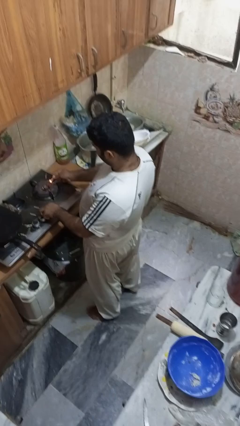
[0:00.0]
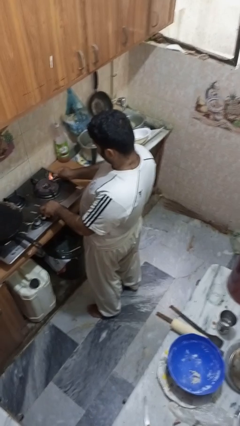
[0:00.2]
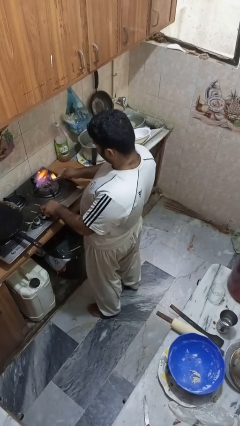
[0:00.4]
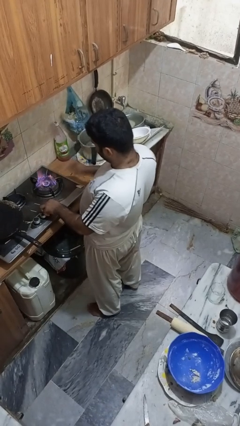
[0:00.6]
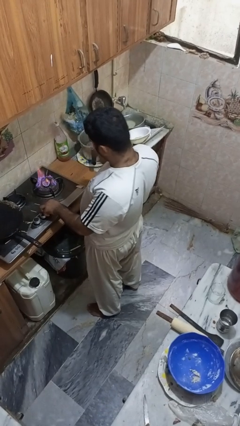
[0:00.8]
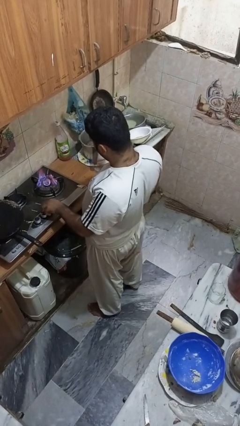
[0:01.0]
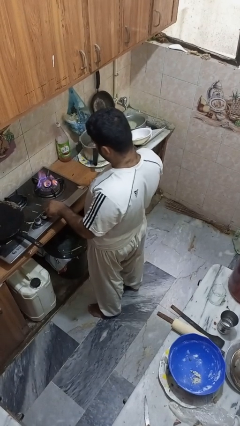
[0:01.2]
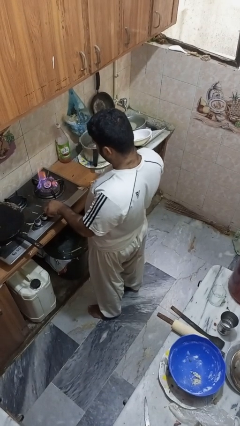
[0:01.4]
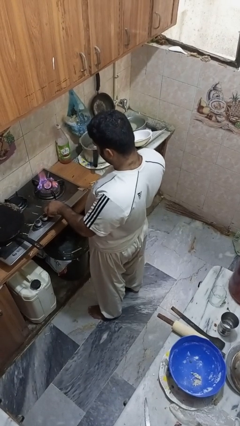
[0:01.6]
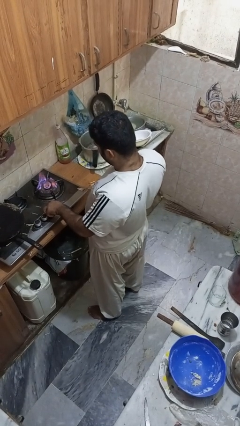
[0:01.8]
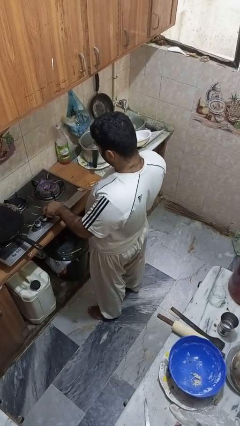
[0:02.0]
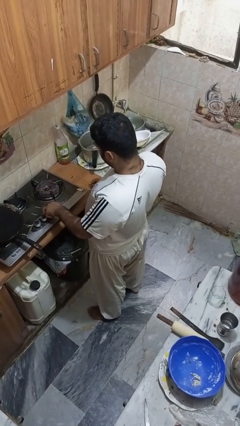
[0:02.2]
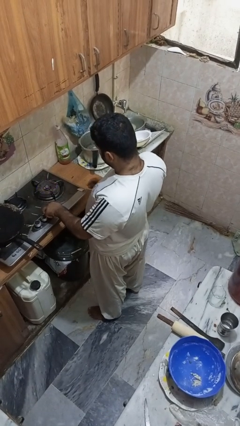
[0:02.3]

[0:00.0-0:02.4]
person turns off stovetop

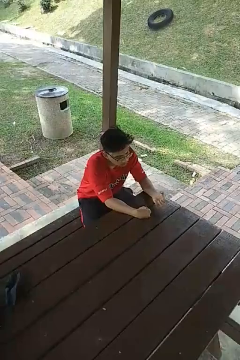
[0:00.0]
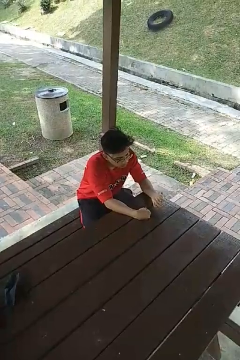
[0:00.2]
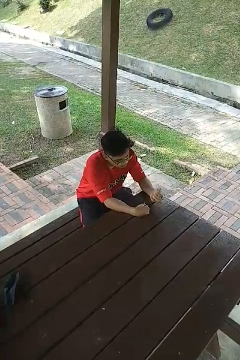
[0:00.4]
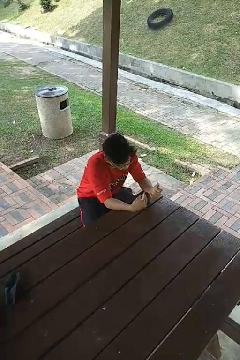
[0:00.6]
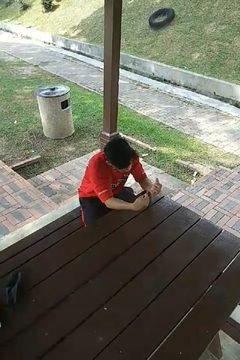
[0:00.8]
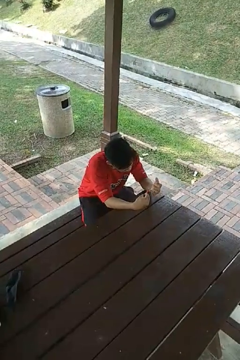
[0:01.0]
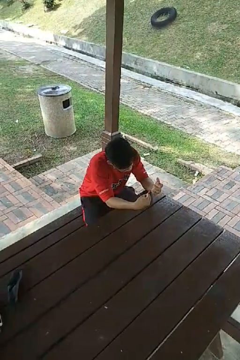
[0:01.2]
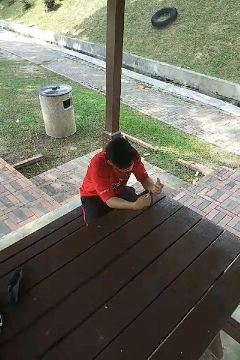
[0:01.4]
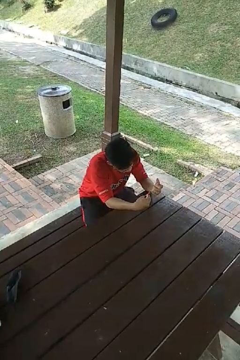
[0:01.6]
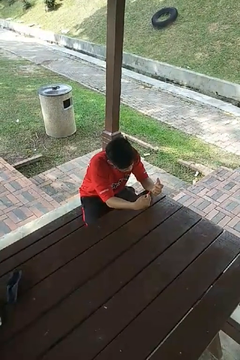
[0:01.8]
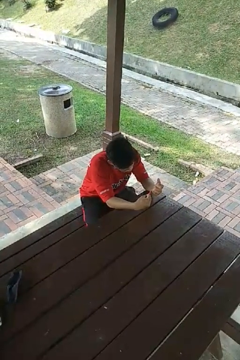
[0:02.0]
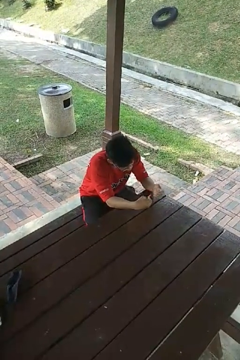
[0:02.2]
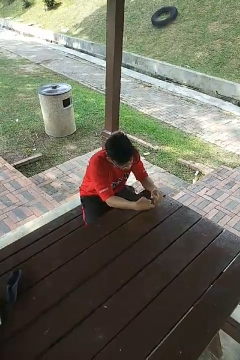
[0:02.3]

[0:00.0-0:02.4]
person paints fingernails

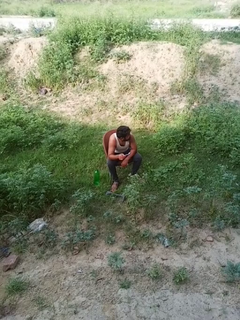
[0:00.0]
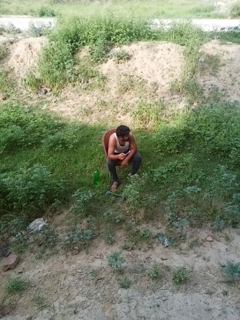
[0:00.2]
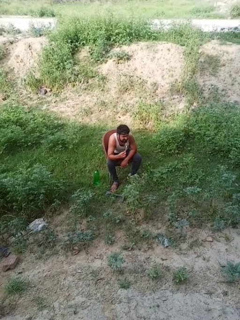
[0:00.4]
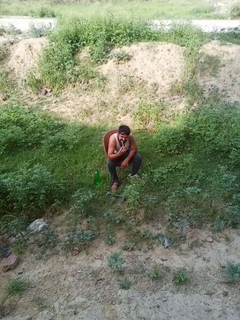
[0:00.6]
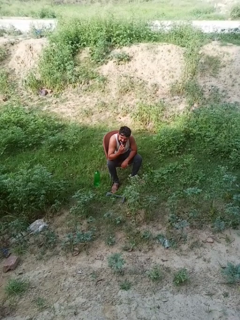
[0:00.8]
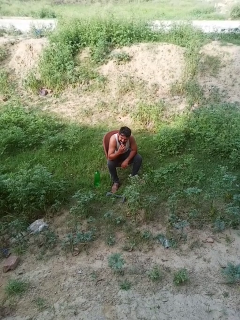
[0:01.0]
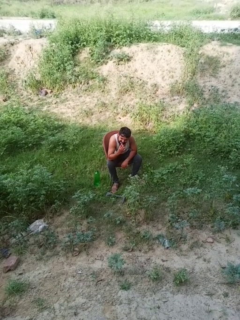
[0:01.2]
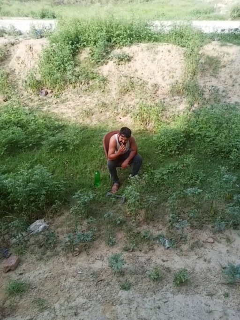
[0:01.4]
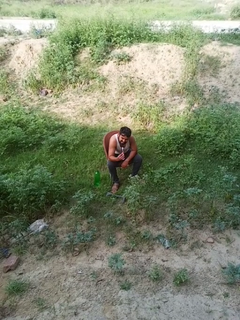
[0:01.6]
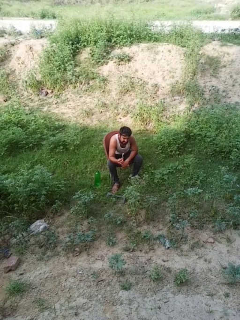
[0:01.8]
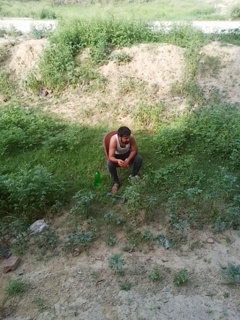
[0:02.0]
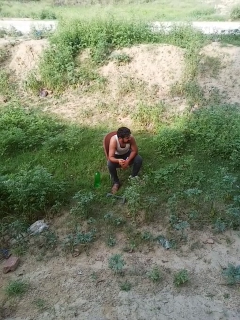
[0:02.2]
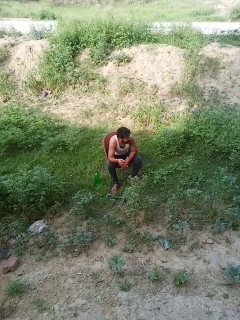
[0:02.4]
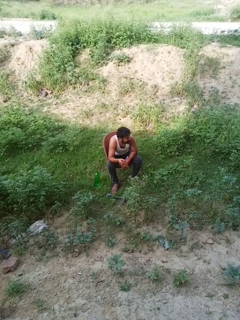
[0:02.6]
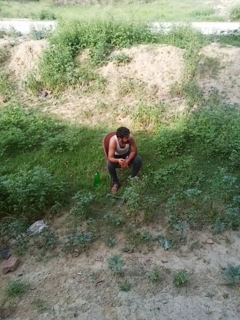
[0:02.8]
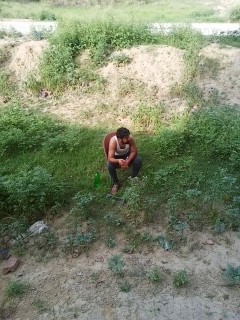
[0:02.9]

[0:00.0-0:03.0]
person brushes teeth

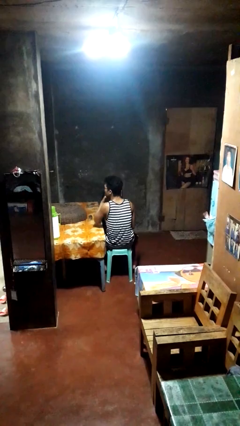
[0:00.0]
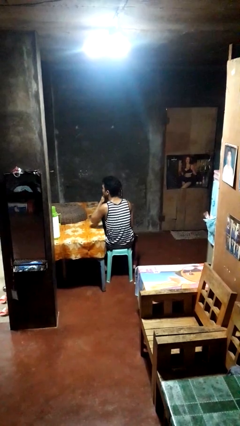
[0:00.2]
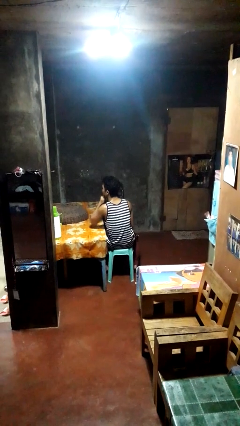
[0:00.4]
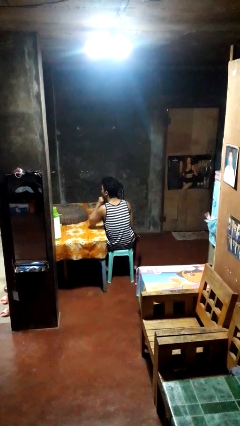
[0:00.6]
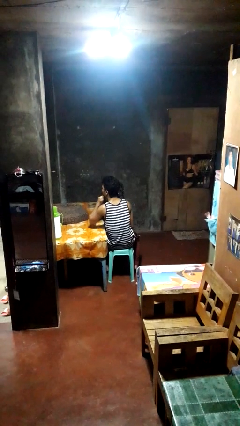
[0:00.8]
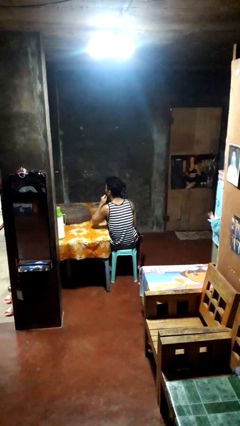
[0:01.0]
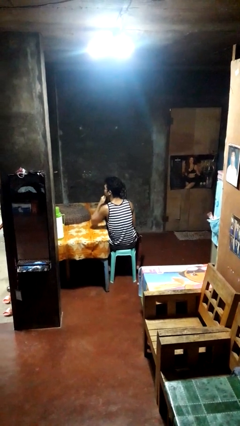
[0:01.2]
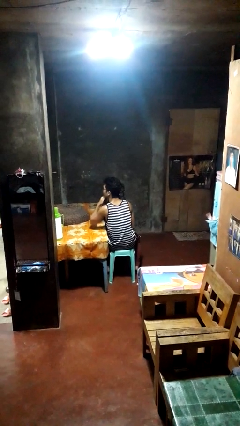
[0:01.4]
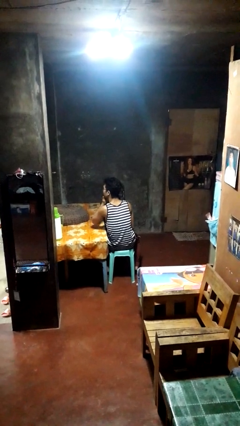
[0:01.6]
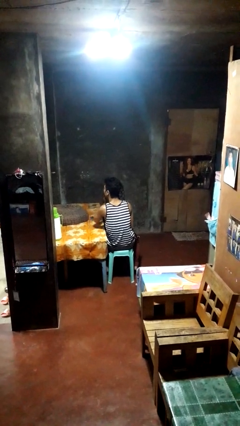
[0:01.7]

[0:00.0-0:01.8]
person strokes chin

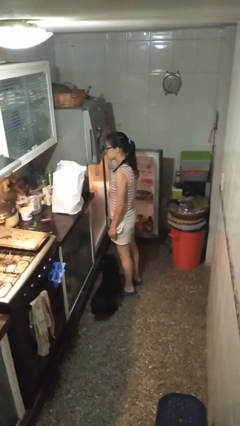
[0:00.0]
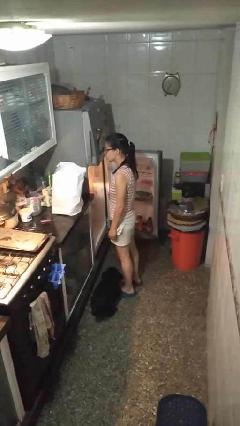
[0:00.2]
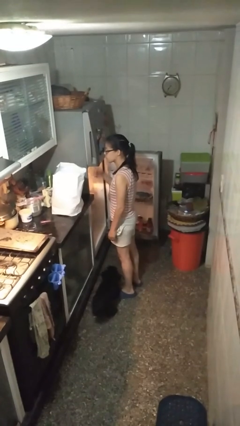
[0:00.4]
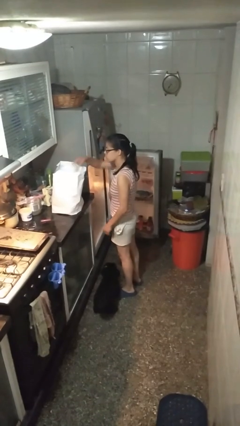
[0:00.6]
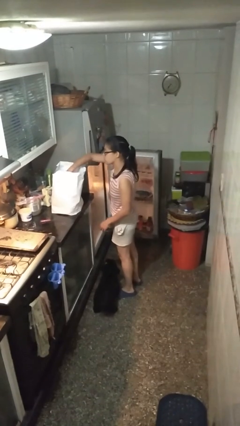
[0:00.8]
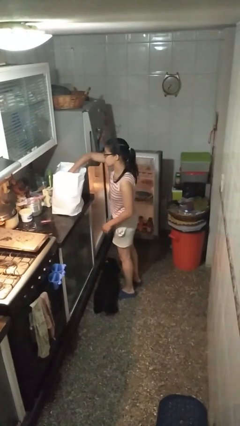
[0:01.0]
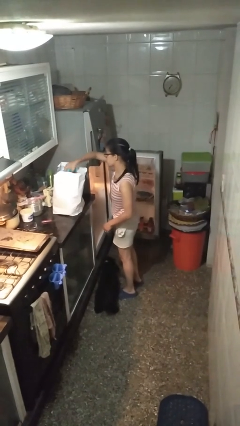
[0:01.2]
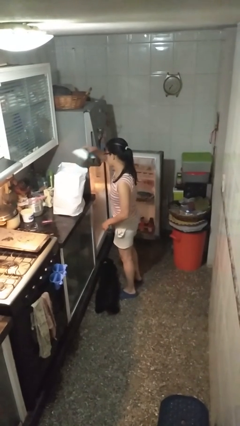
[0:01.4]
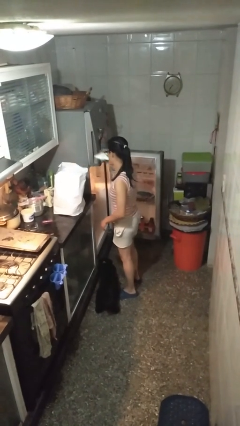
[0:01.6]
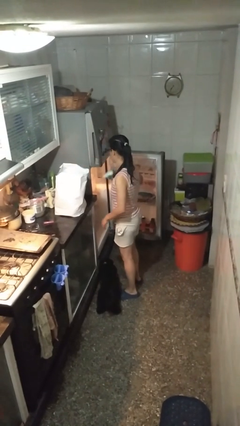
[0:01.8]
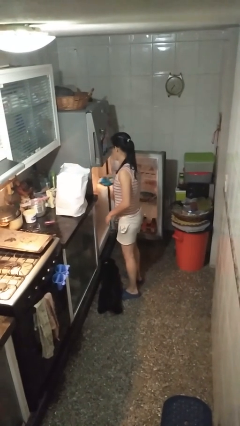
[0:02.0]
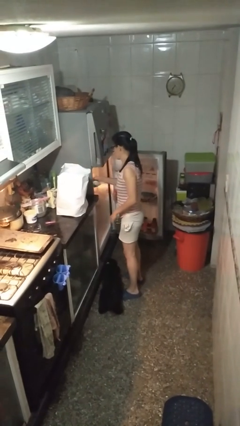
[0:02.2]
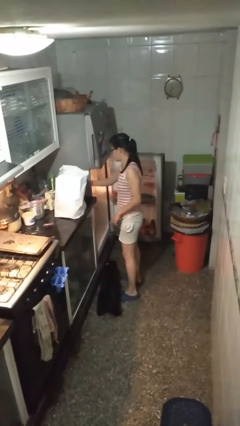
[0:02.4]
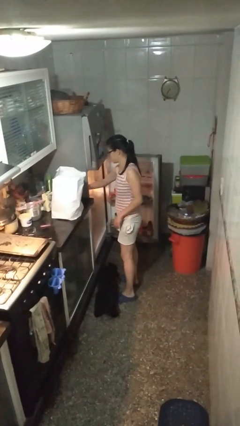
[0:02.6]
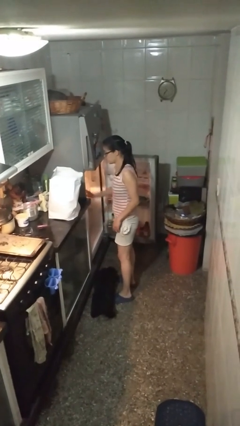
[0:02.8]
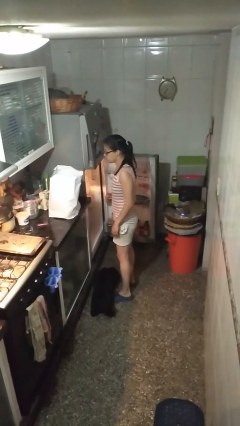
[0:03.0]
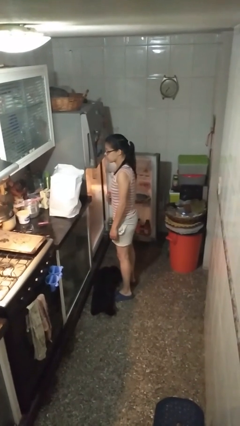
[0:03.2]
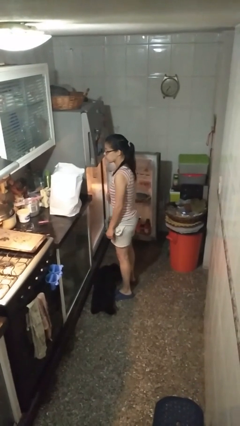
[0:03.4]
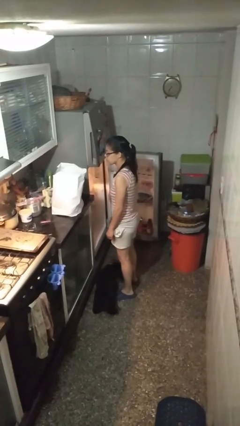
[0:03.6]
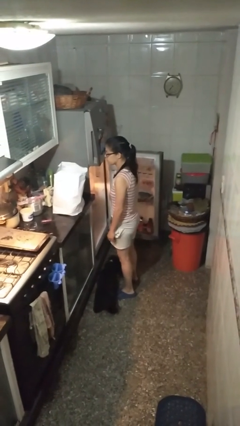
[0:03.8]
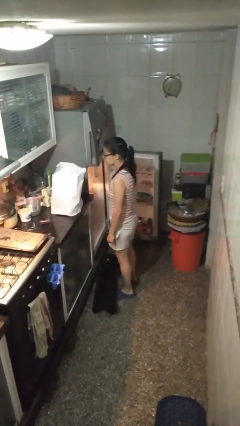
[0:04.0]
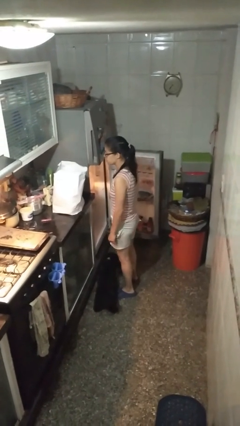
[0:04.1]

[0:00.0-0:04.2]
person loads groceries into refrigerator

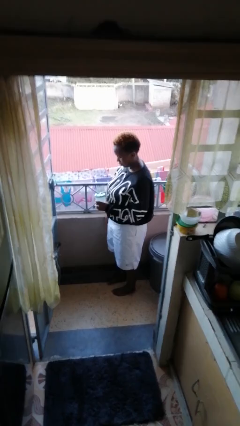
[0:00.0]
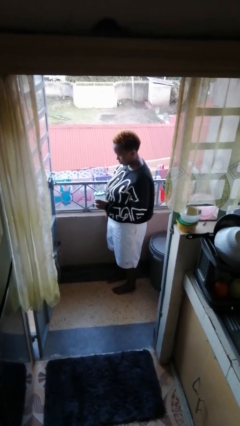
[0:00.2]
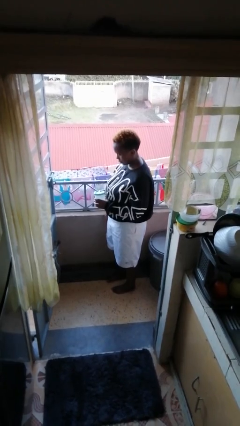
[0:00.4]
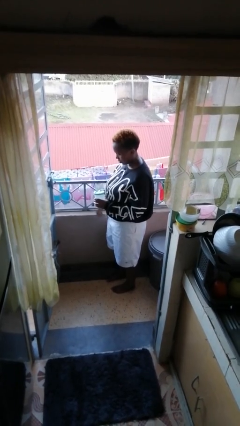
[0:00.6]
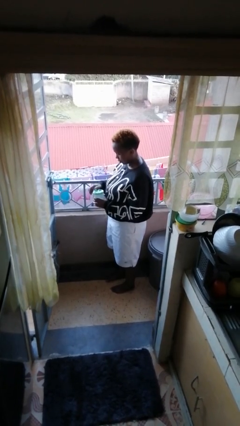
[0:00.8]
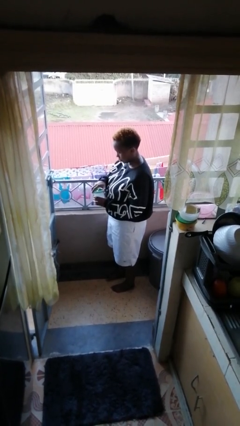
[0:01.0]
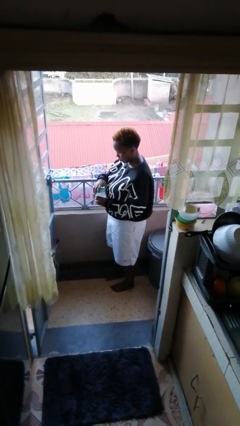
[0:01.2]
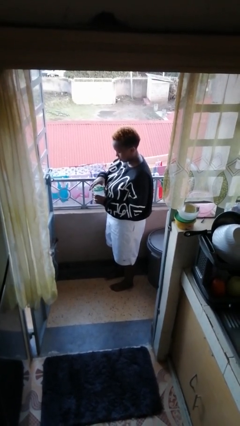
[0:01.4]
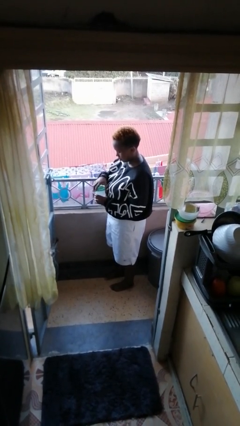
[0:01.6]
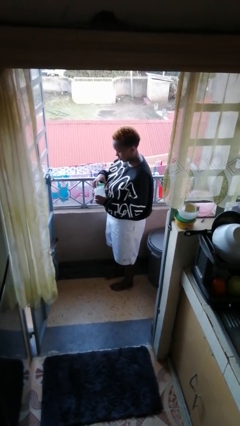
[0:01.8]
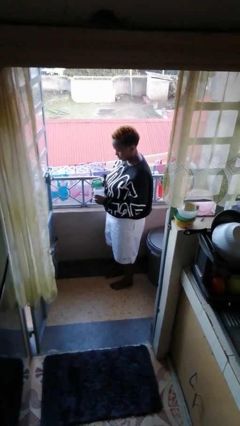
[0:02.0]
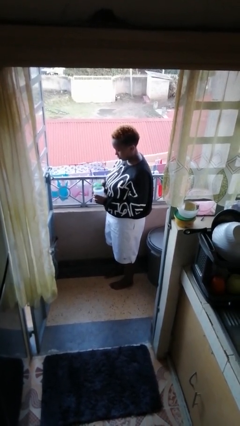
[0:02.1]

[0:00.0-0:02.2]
person opens jar

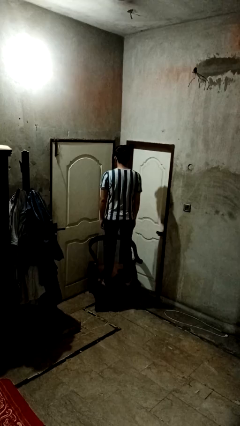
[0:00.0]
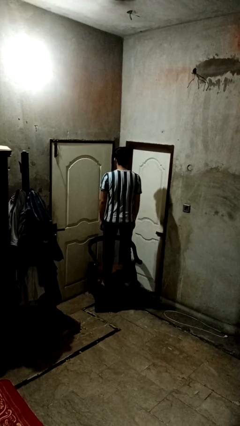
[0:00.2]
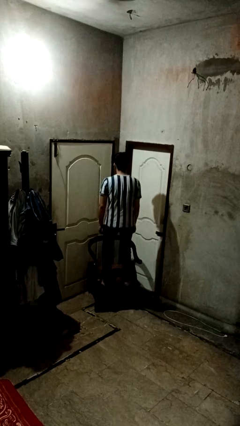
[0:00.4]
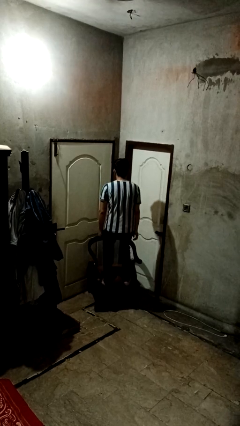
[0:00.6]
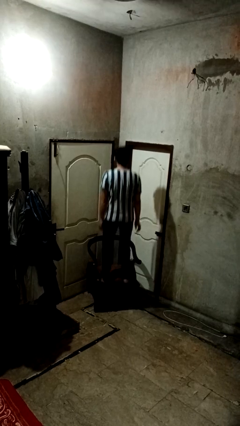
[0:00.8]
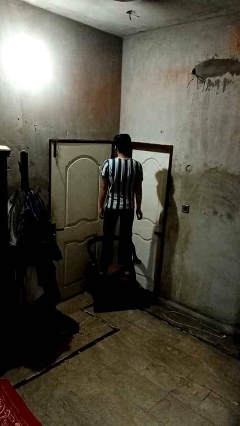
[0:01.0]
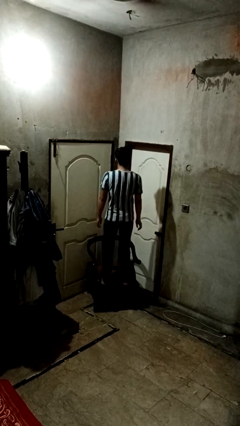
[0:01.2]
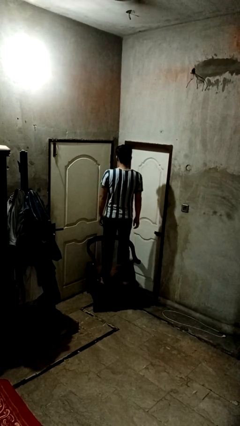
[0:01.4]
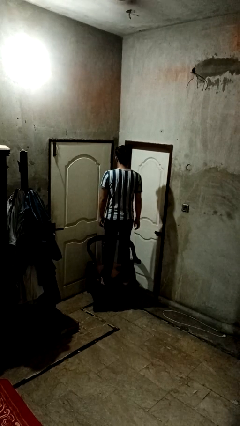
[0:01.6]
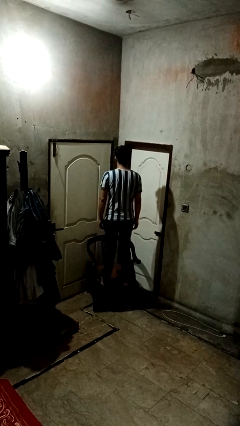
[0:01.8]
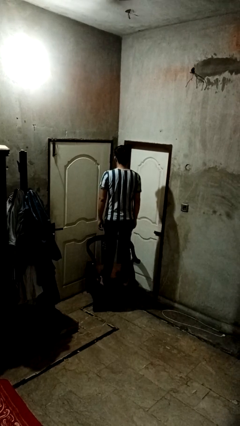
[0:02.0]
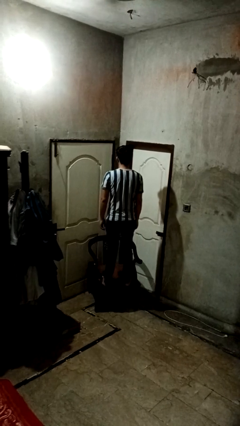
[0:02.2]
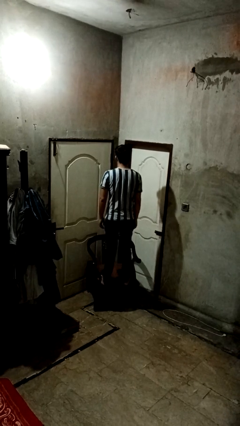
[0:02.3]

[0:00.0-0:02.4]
person jumps on couch
